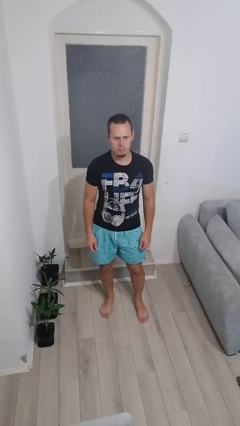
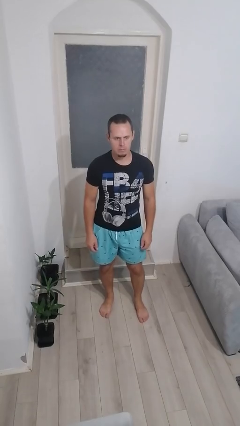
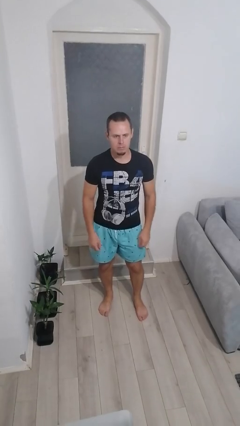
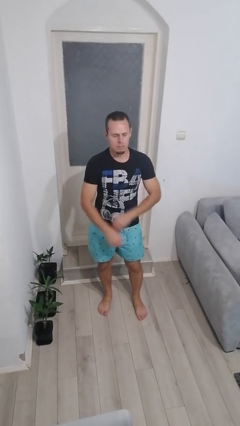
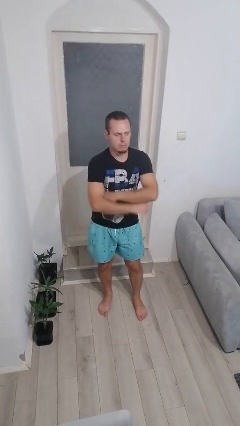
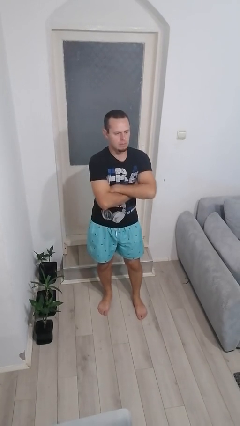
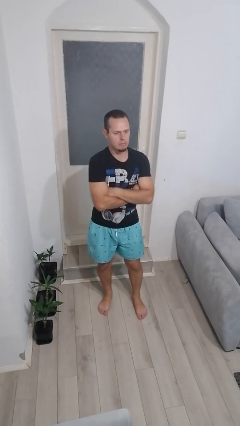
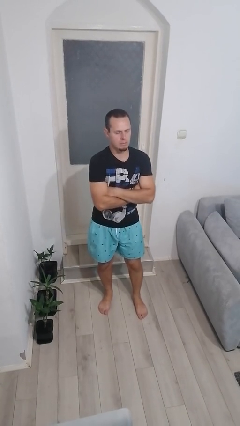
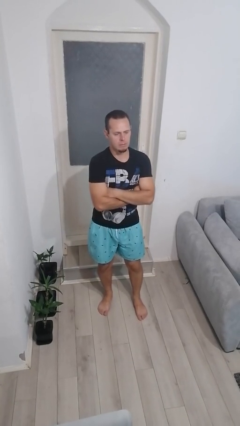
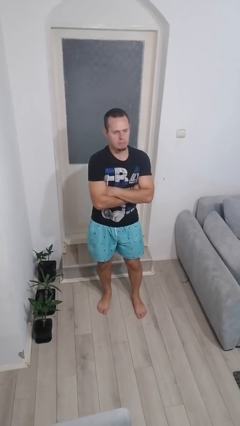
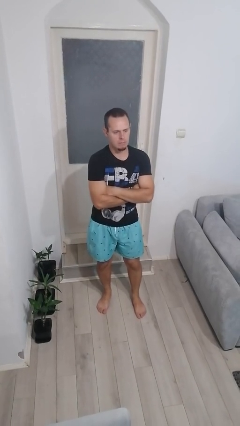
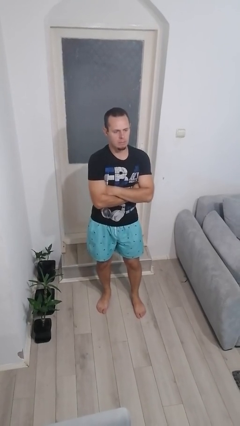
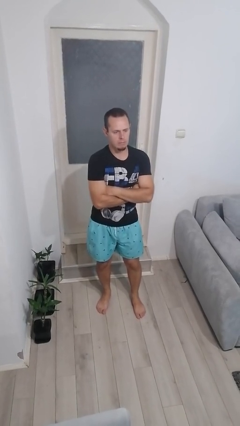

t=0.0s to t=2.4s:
person crosses arms

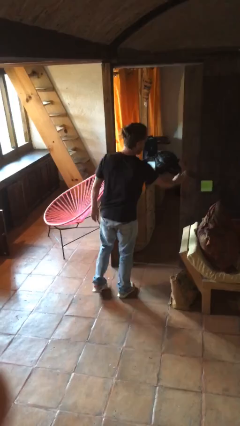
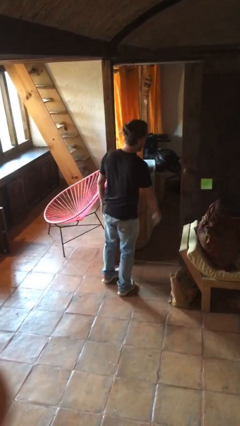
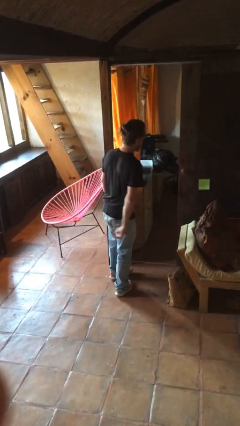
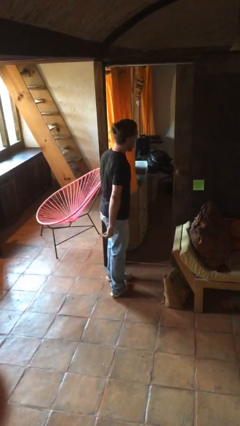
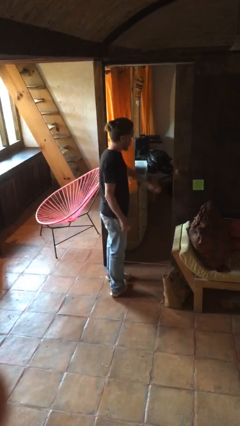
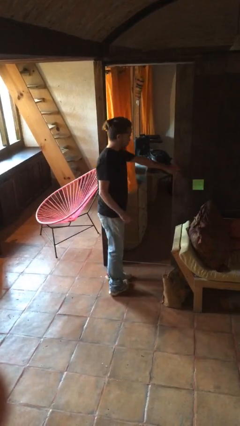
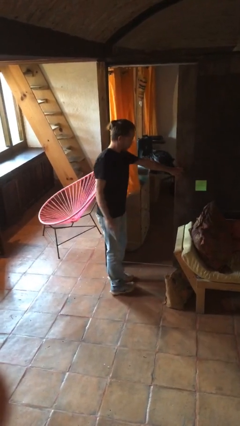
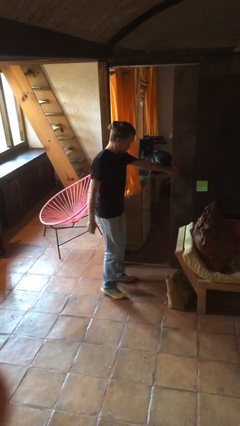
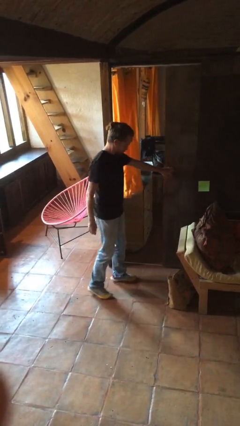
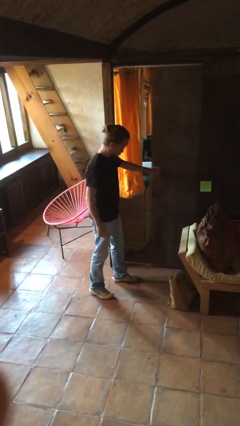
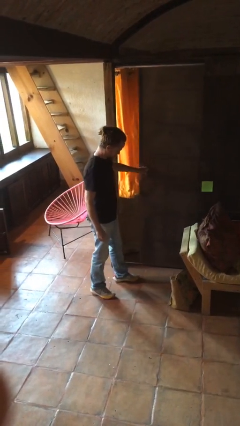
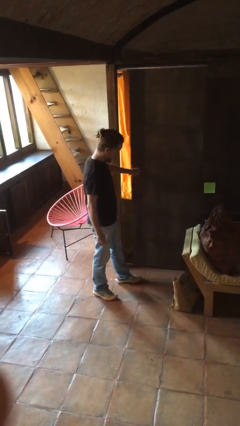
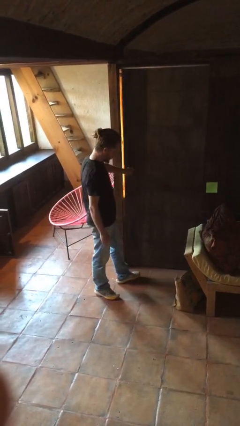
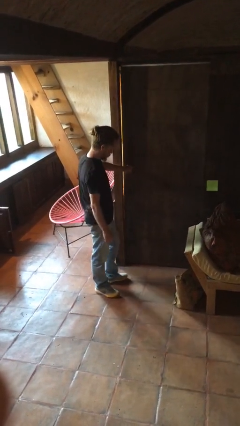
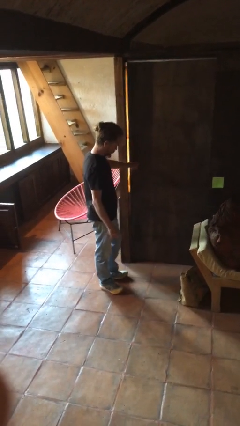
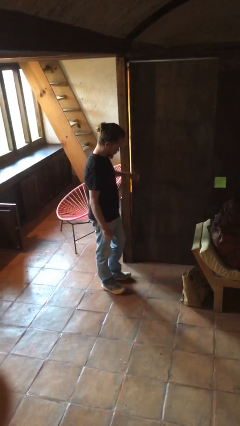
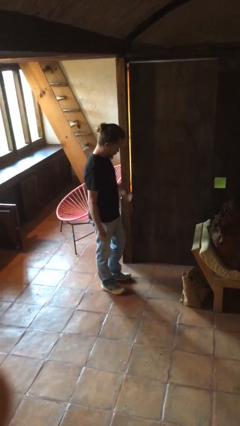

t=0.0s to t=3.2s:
person closes sliding door

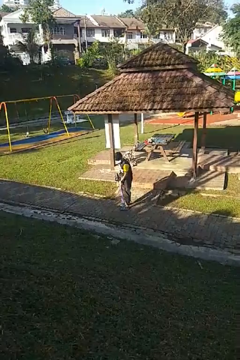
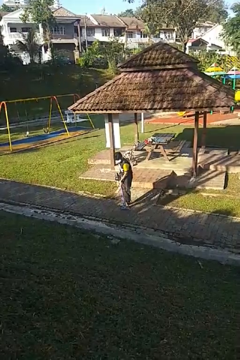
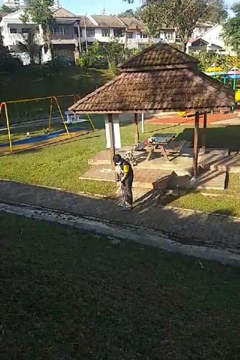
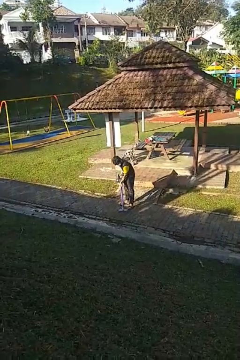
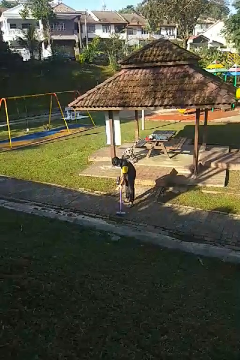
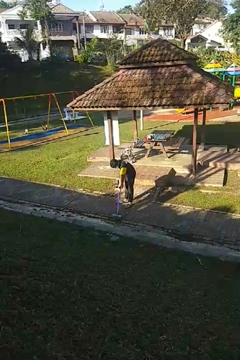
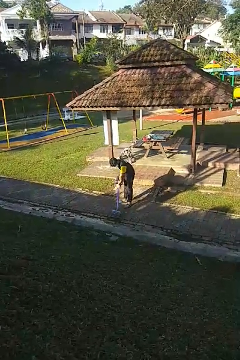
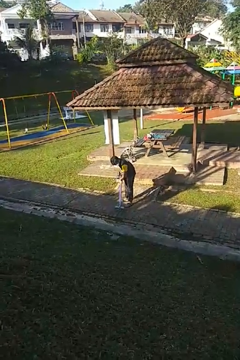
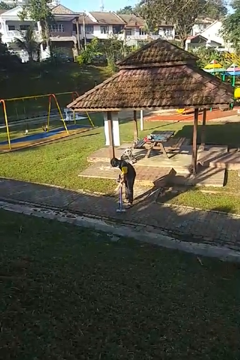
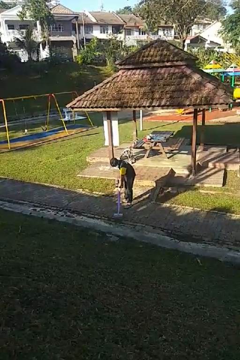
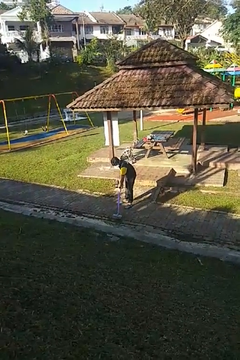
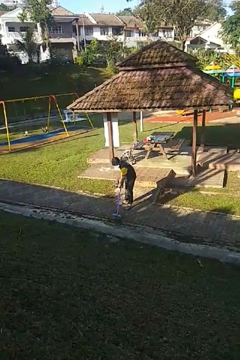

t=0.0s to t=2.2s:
person vacuums carpet

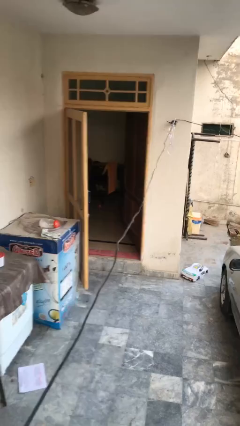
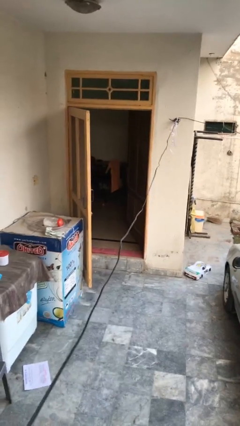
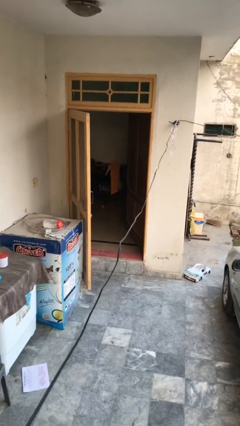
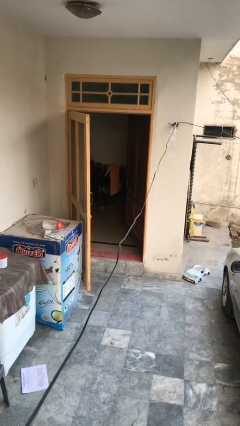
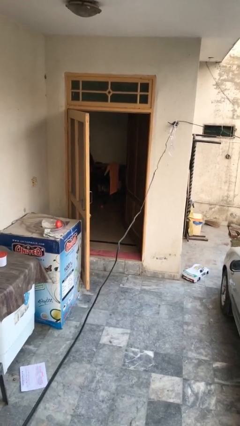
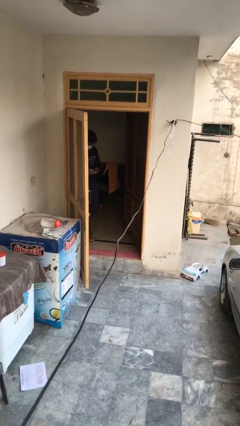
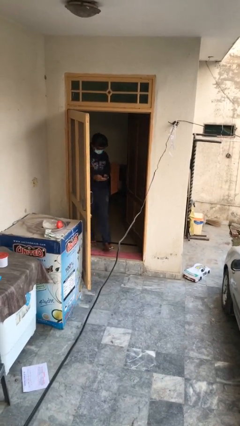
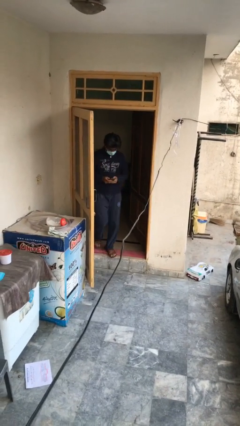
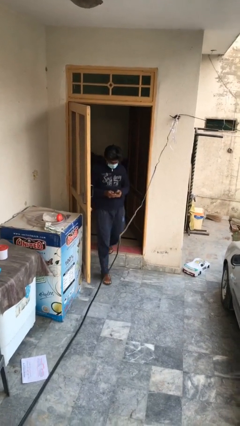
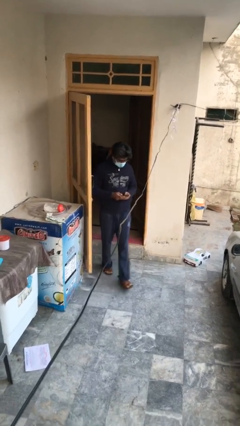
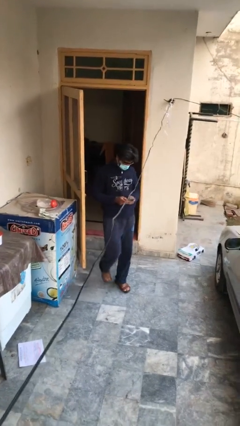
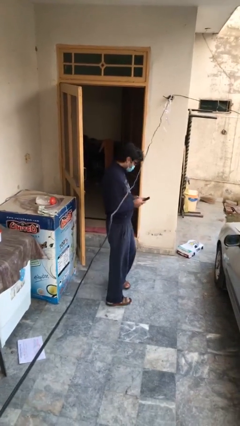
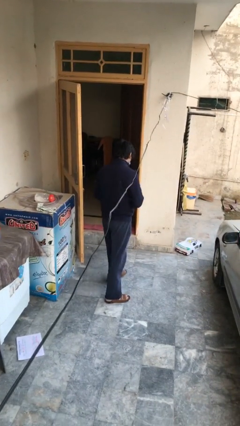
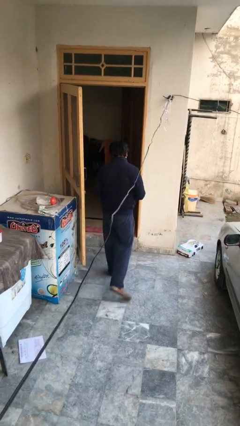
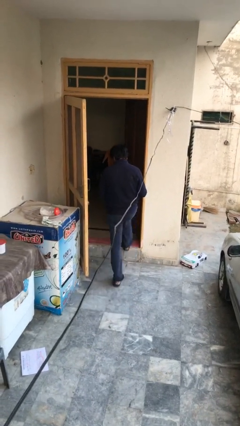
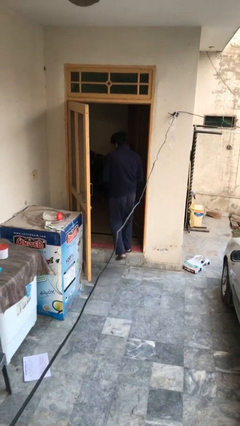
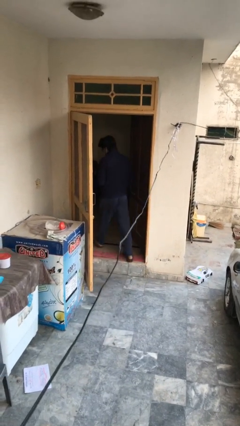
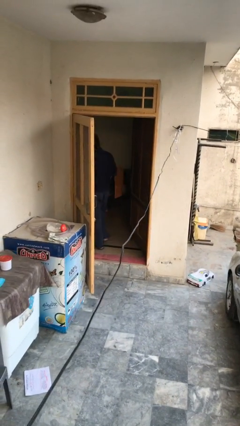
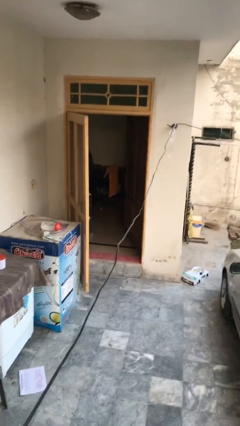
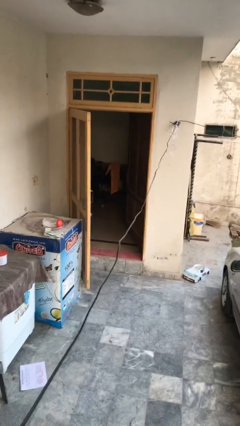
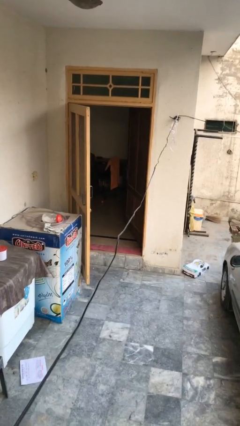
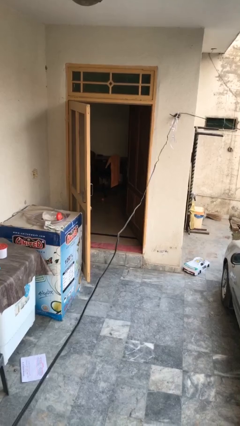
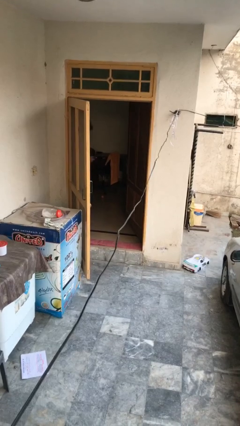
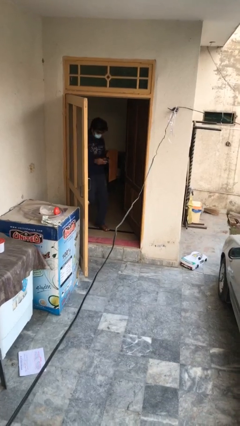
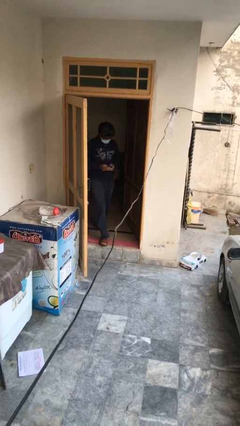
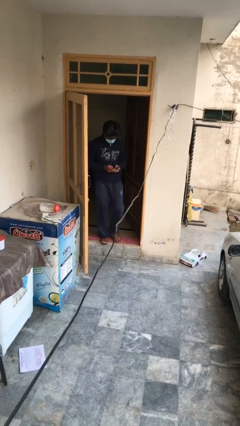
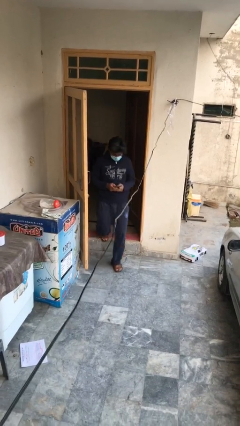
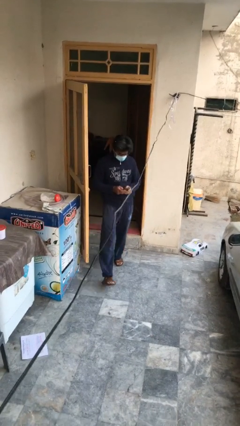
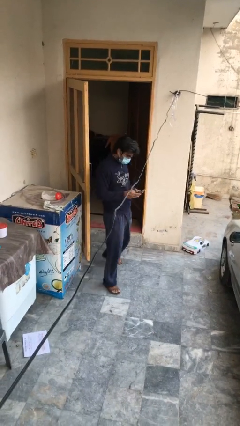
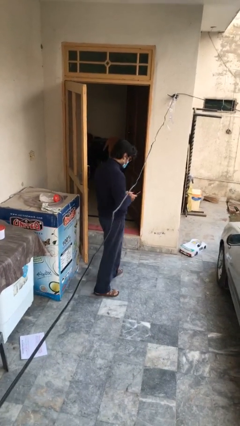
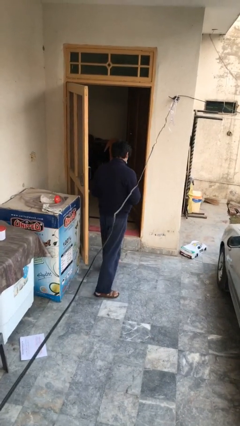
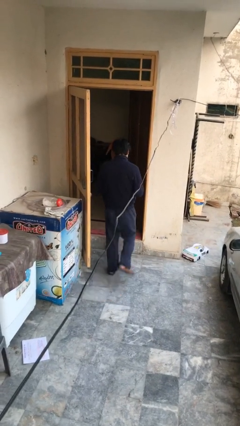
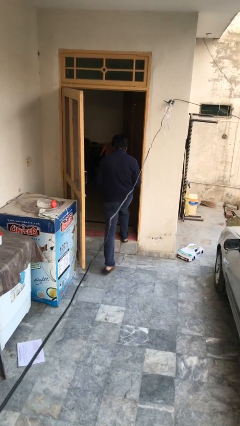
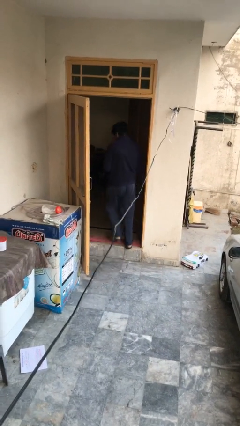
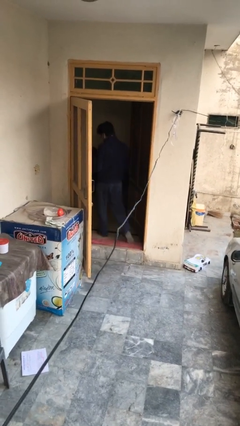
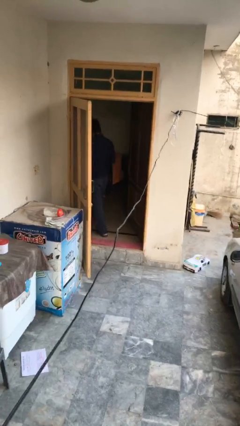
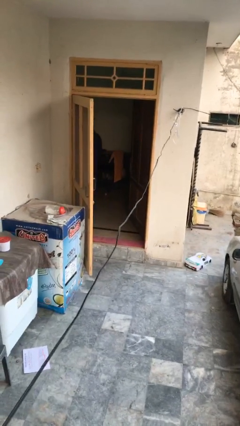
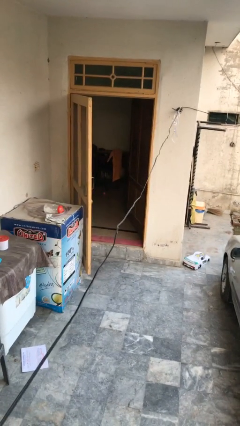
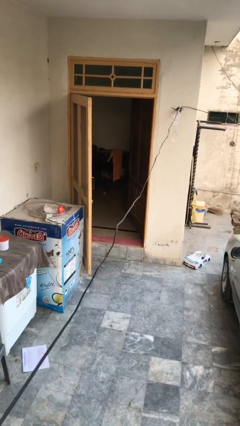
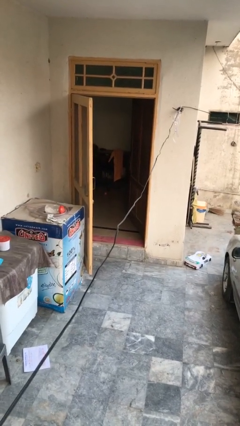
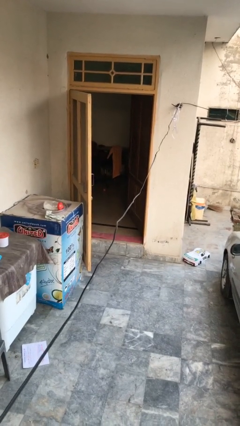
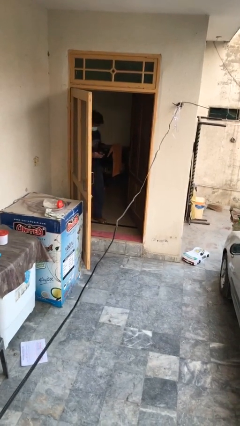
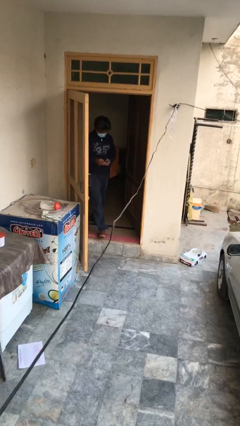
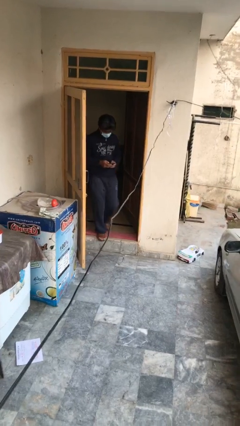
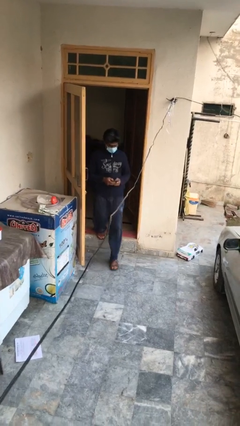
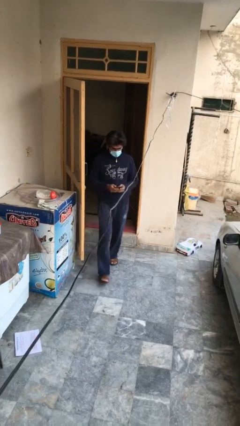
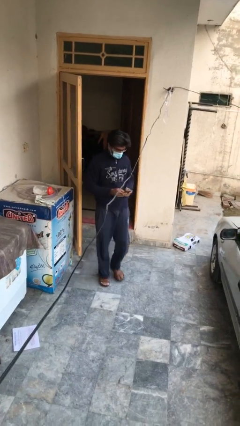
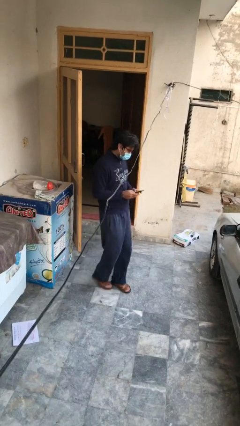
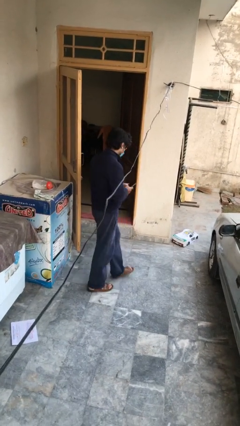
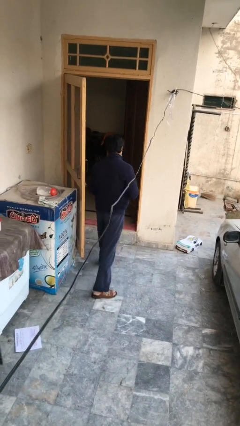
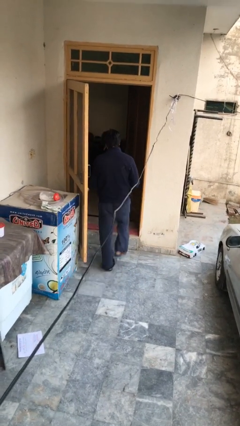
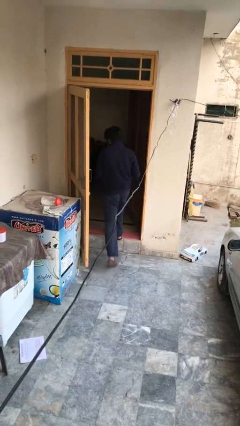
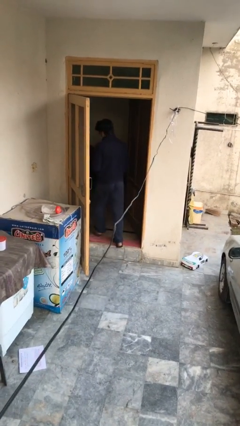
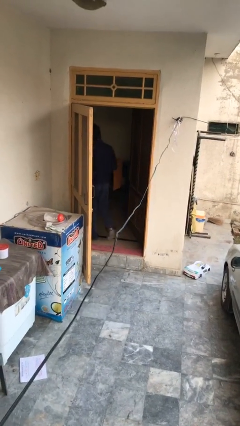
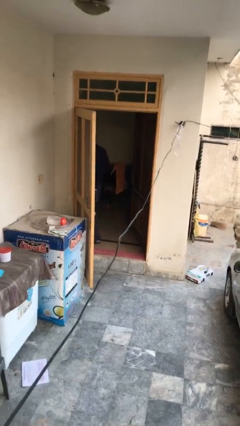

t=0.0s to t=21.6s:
person texts on phone
